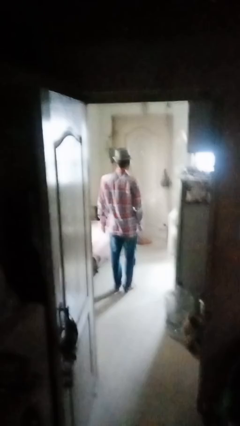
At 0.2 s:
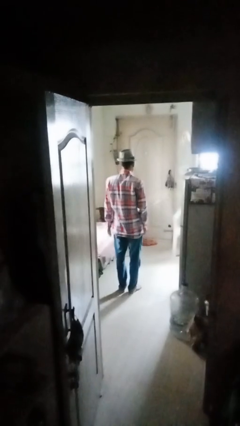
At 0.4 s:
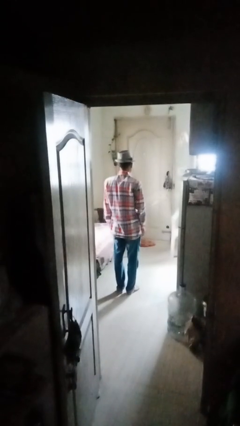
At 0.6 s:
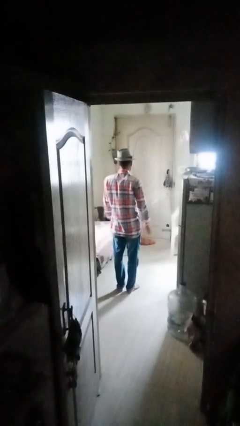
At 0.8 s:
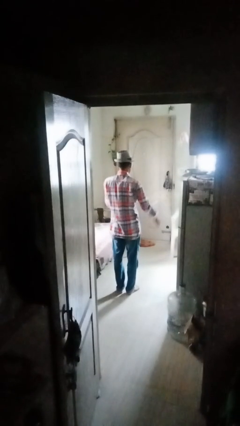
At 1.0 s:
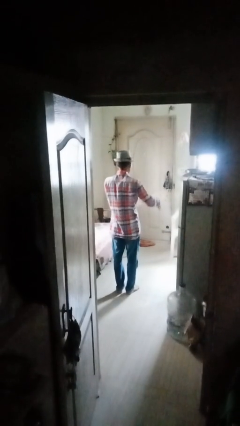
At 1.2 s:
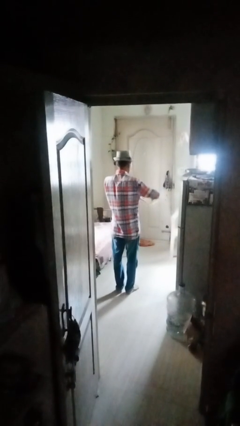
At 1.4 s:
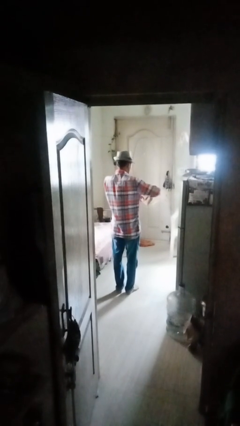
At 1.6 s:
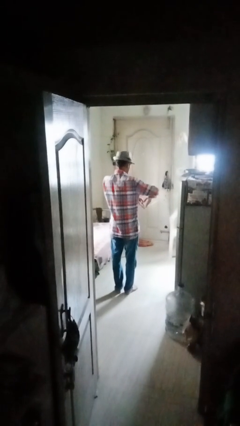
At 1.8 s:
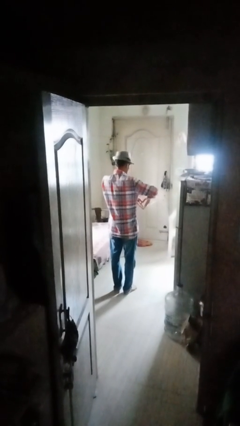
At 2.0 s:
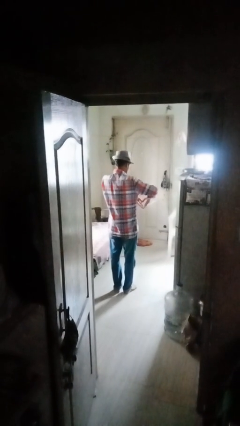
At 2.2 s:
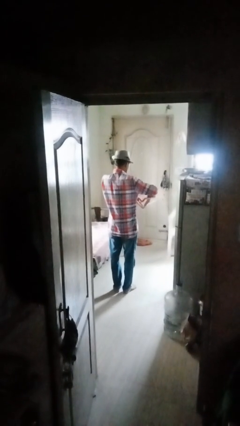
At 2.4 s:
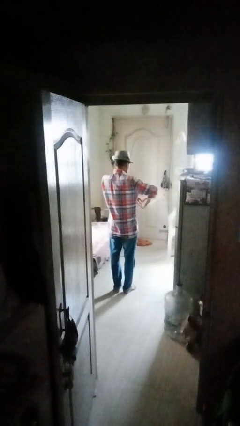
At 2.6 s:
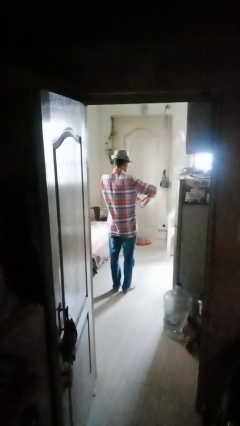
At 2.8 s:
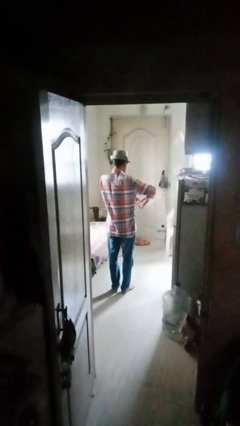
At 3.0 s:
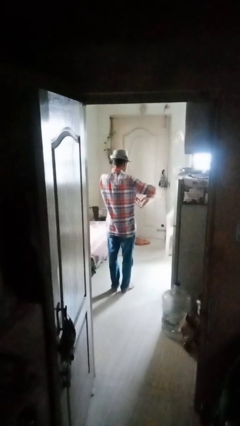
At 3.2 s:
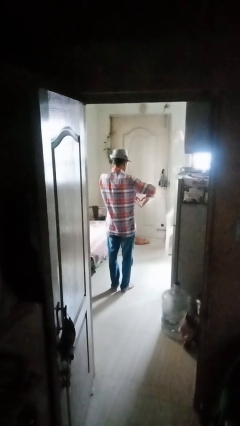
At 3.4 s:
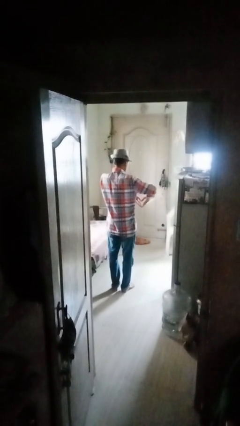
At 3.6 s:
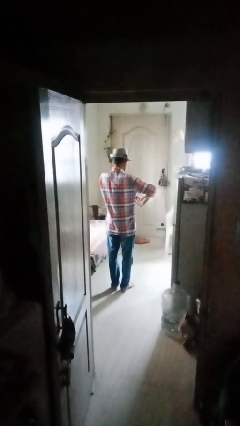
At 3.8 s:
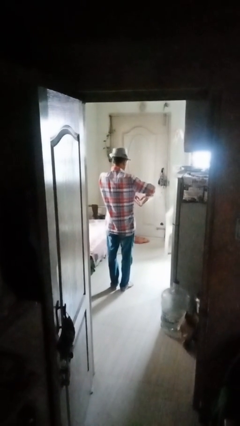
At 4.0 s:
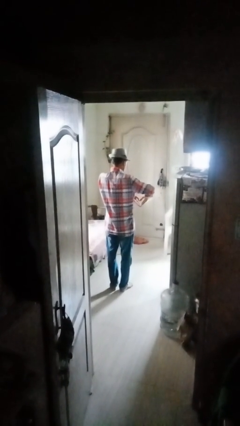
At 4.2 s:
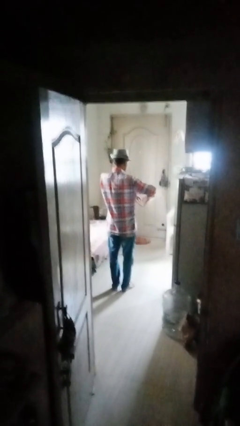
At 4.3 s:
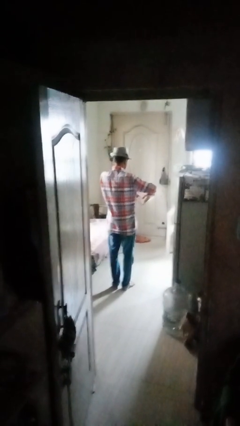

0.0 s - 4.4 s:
person gestures heart

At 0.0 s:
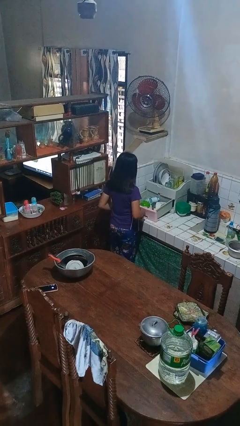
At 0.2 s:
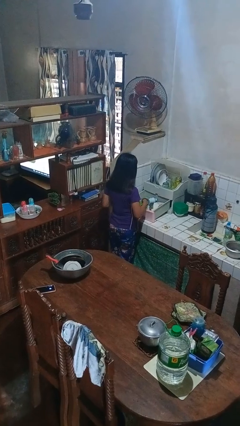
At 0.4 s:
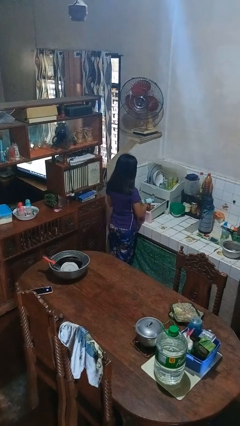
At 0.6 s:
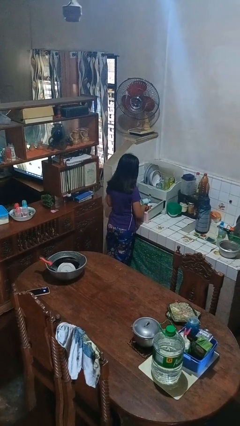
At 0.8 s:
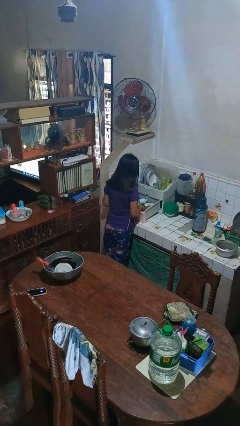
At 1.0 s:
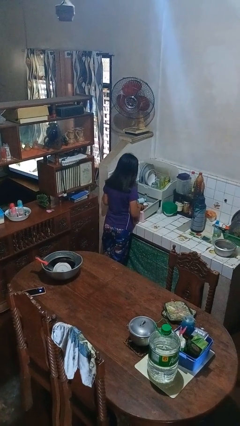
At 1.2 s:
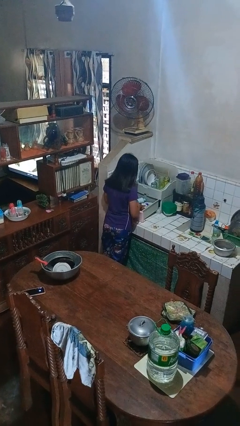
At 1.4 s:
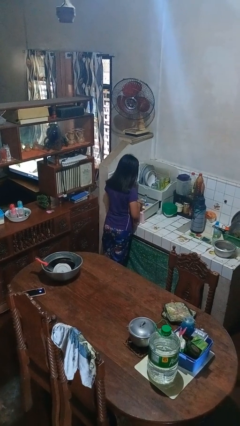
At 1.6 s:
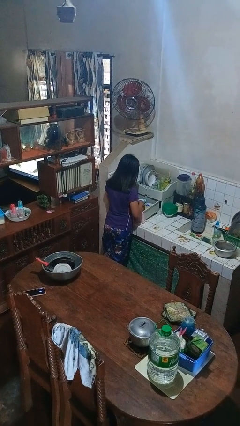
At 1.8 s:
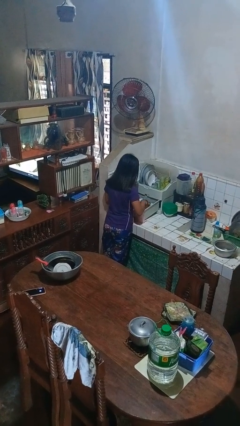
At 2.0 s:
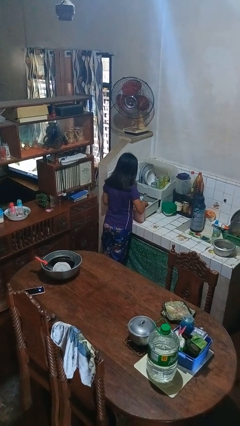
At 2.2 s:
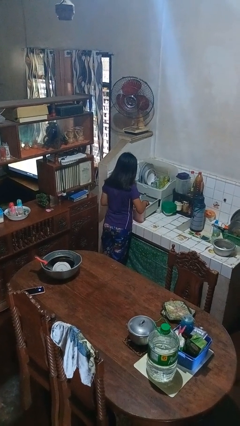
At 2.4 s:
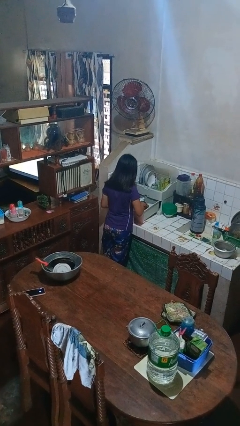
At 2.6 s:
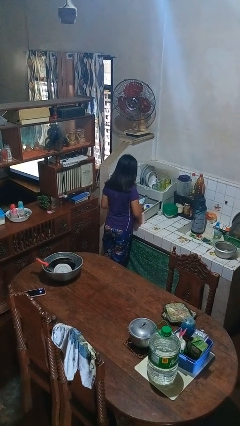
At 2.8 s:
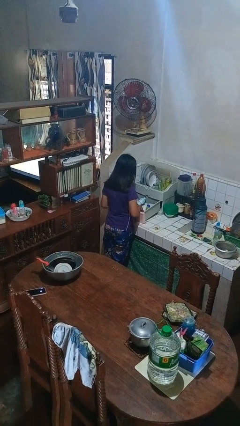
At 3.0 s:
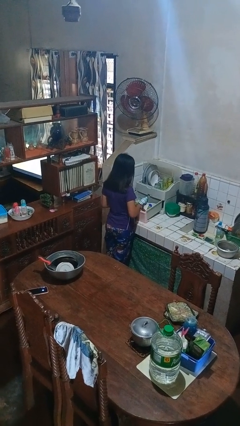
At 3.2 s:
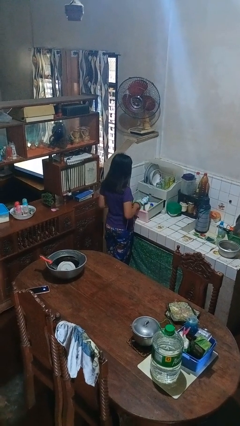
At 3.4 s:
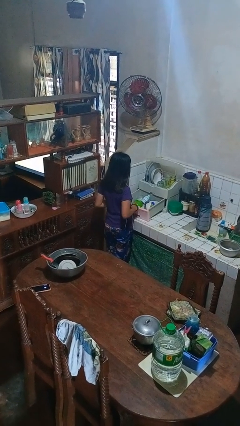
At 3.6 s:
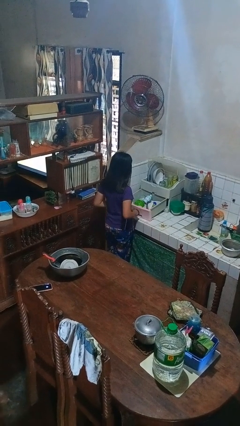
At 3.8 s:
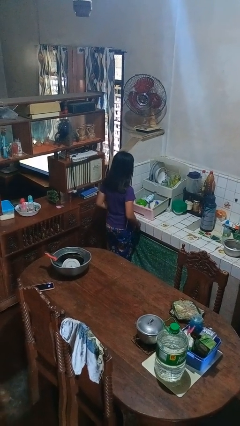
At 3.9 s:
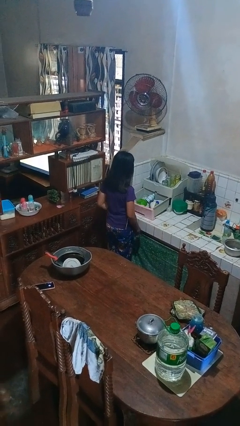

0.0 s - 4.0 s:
person searches in kitchen drawer

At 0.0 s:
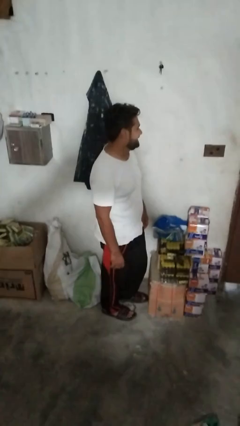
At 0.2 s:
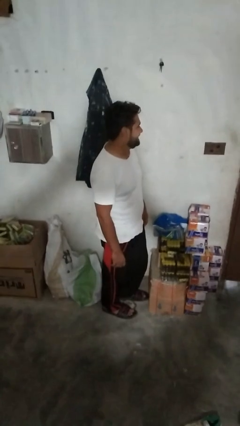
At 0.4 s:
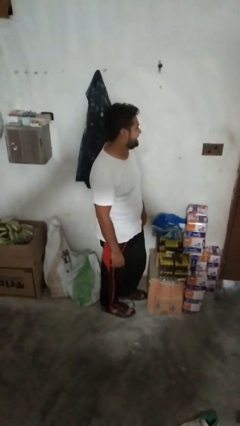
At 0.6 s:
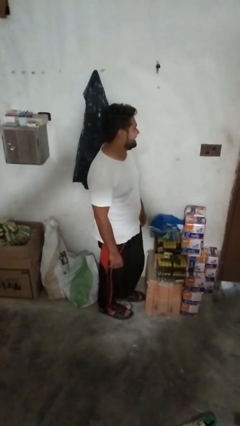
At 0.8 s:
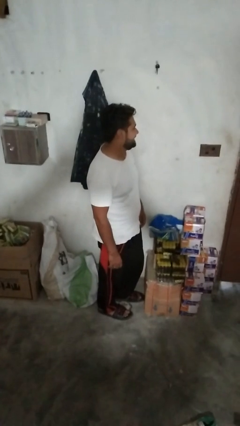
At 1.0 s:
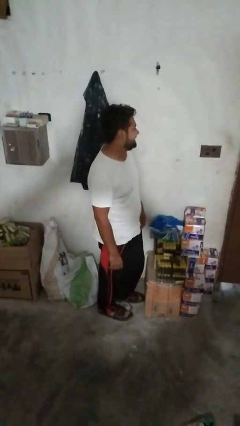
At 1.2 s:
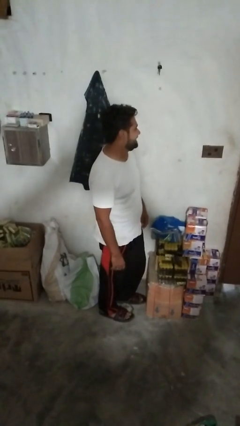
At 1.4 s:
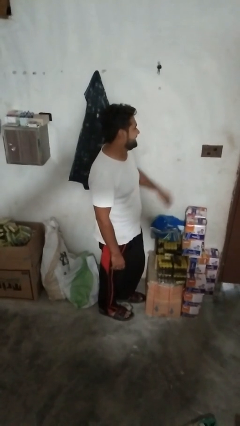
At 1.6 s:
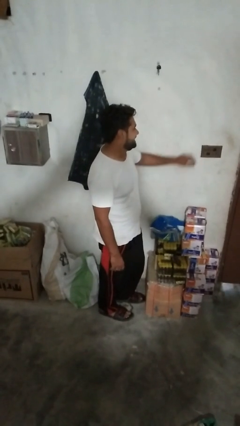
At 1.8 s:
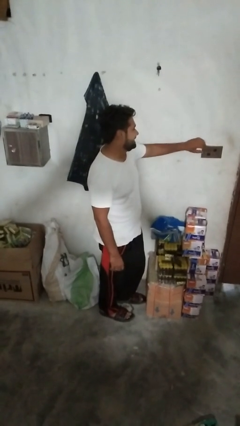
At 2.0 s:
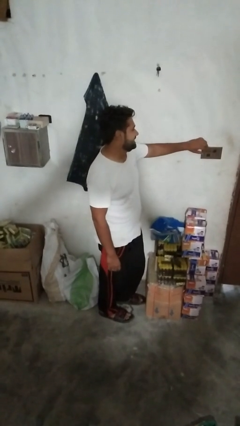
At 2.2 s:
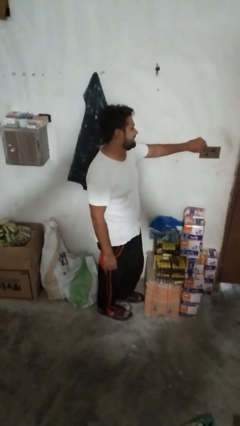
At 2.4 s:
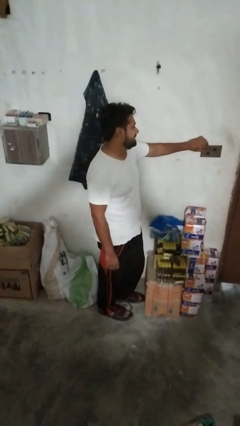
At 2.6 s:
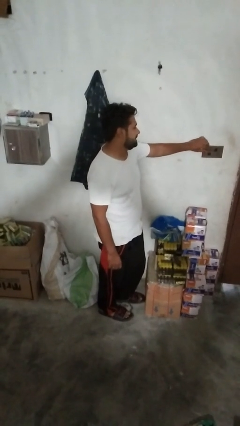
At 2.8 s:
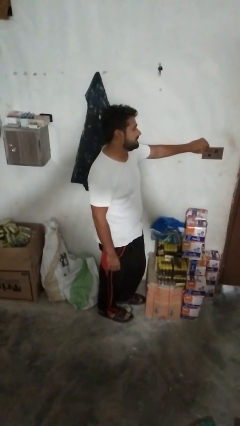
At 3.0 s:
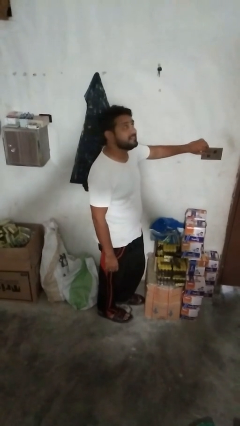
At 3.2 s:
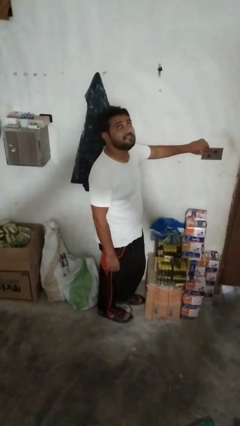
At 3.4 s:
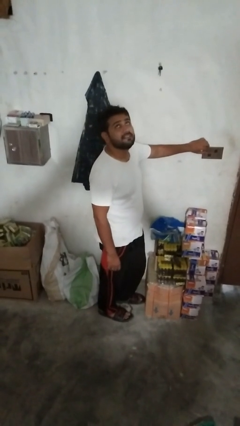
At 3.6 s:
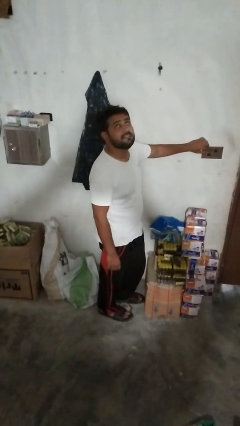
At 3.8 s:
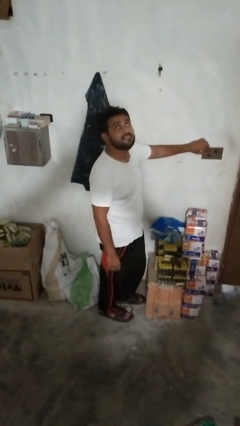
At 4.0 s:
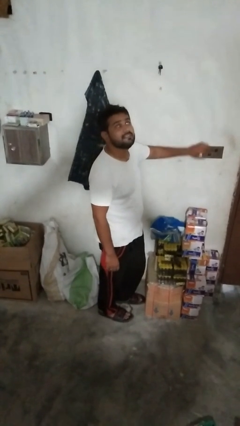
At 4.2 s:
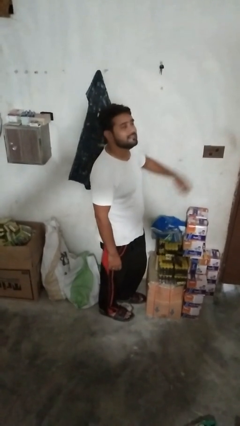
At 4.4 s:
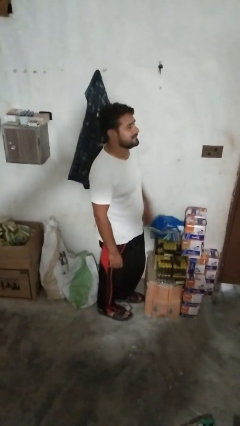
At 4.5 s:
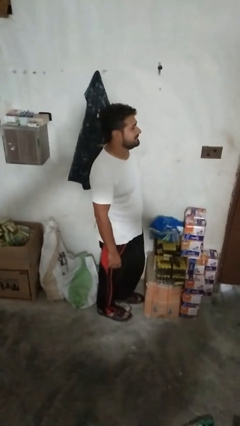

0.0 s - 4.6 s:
person adjusts thermostat

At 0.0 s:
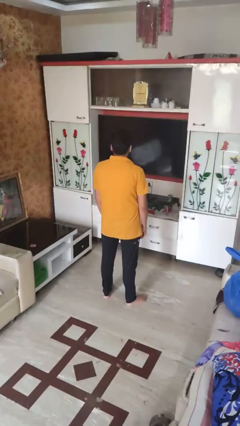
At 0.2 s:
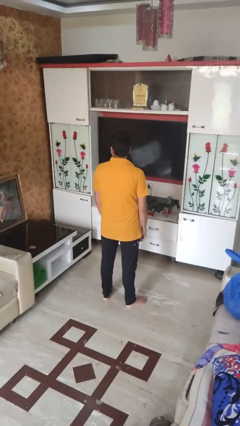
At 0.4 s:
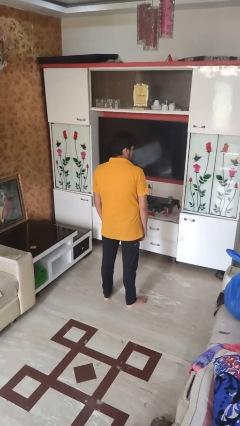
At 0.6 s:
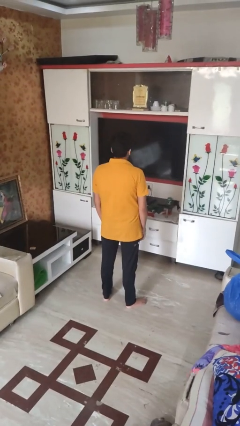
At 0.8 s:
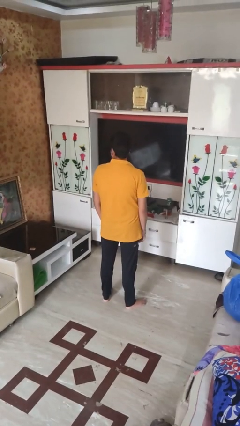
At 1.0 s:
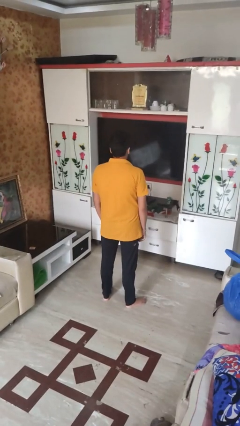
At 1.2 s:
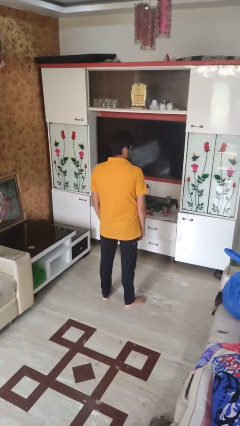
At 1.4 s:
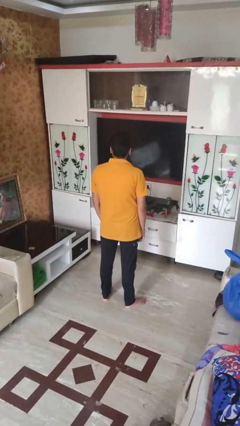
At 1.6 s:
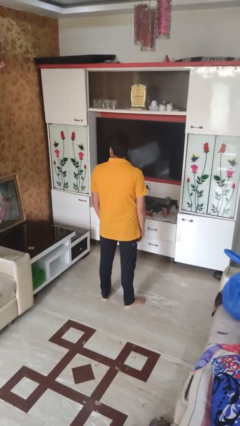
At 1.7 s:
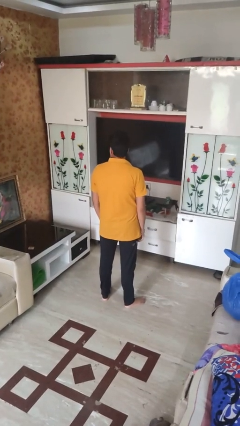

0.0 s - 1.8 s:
person shakes head

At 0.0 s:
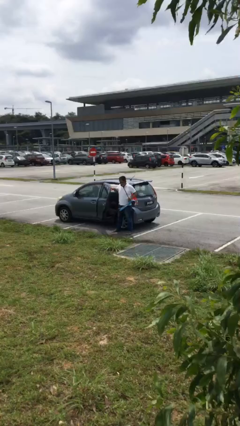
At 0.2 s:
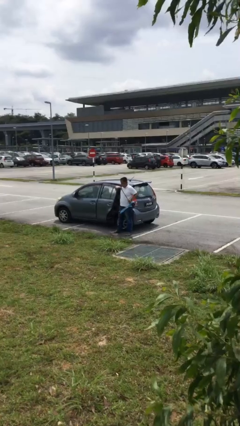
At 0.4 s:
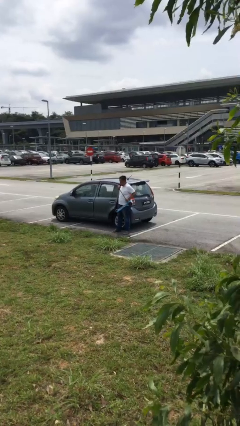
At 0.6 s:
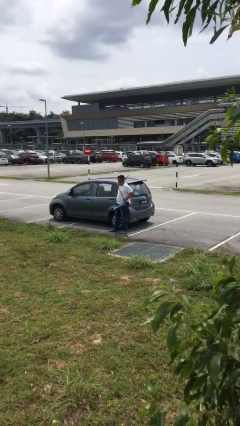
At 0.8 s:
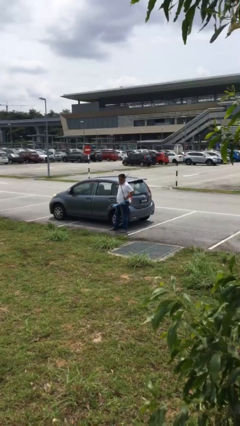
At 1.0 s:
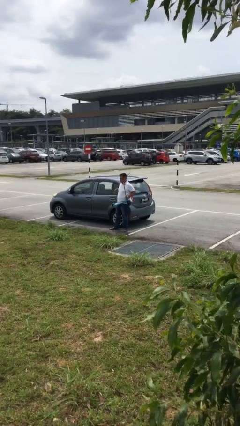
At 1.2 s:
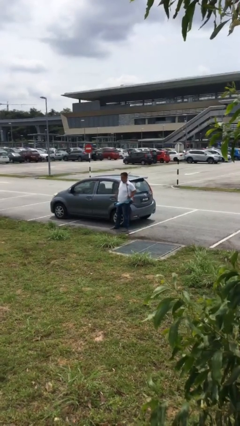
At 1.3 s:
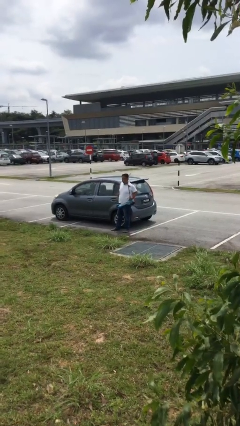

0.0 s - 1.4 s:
person closes car door

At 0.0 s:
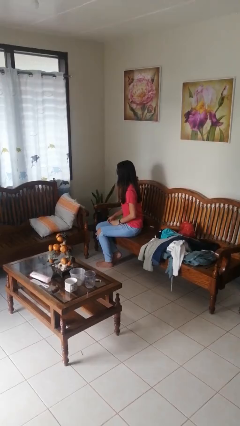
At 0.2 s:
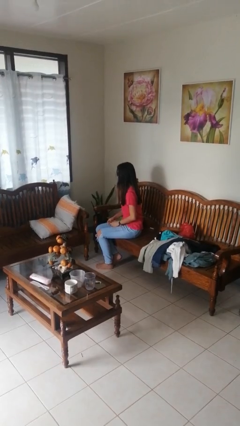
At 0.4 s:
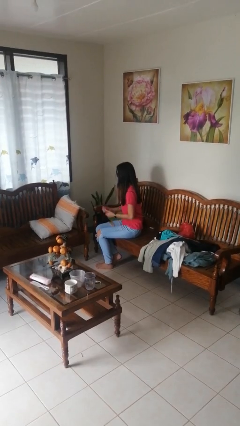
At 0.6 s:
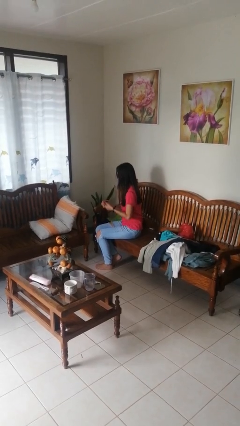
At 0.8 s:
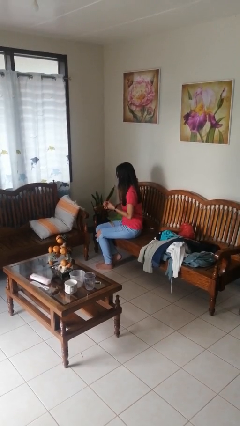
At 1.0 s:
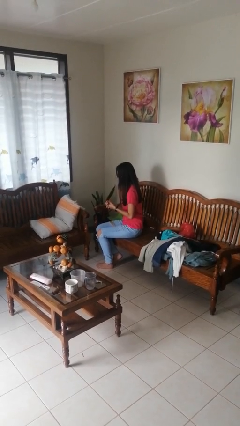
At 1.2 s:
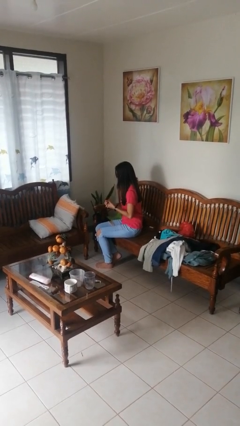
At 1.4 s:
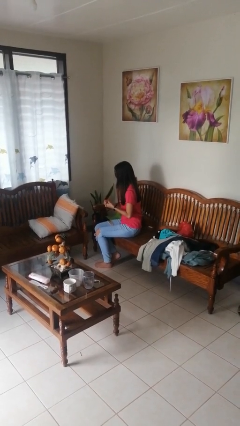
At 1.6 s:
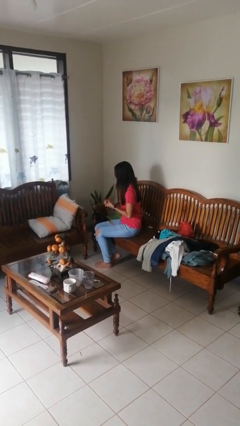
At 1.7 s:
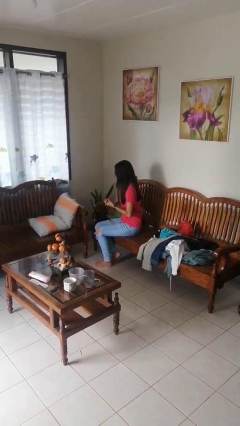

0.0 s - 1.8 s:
person files fingernails
